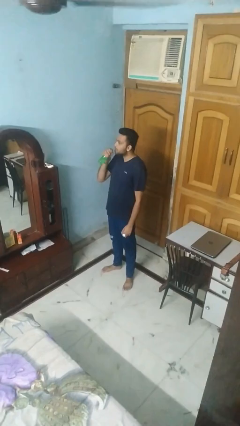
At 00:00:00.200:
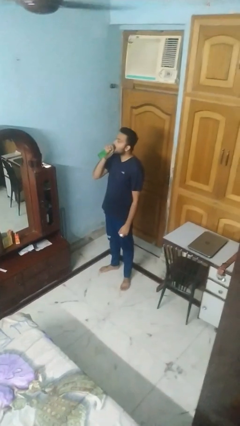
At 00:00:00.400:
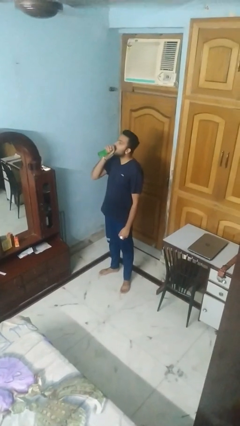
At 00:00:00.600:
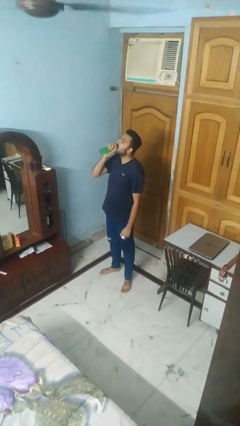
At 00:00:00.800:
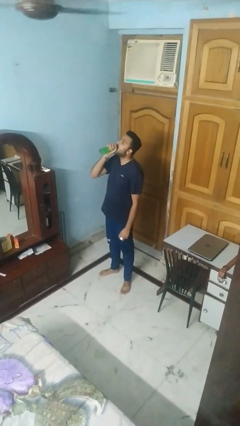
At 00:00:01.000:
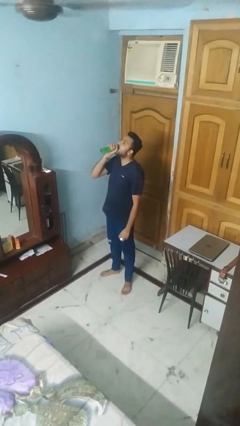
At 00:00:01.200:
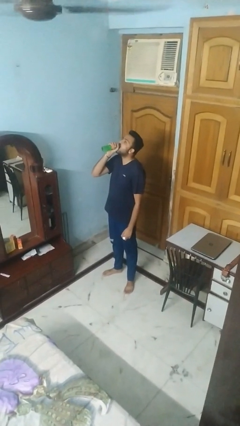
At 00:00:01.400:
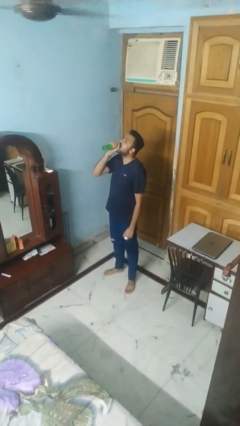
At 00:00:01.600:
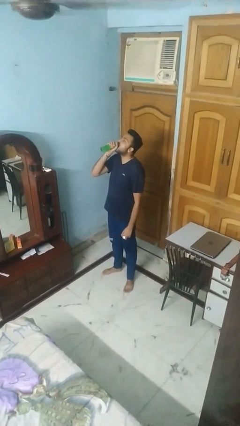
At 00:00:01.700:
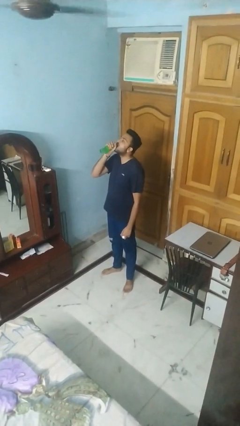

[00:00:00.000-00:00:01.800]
person drinks from bottle

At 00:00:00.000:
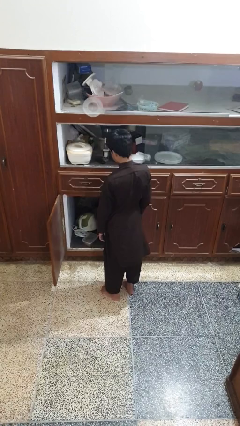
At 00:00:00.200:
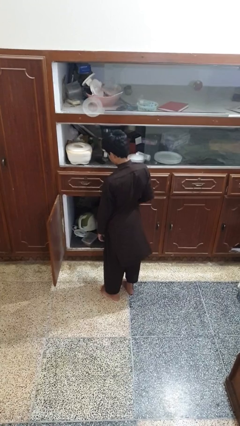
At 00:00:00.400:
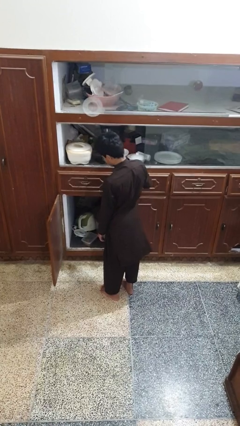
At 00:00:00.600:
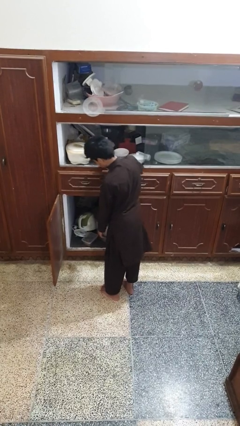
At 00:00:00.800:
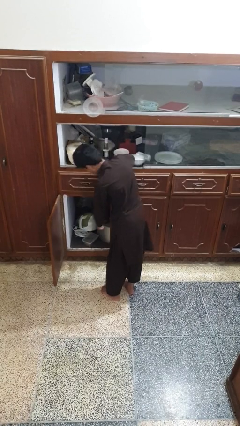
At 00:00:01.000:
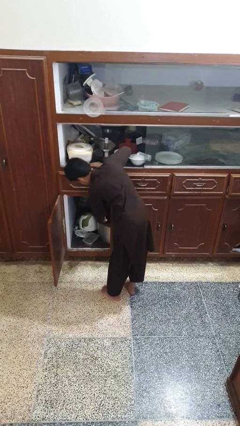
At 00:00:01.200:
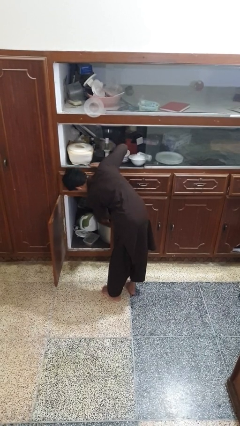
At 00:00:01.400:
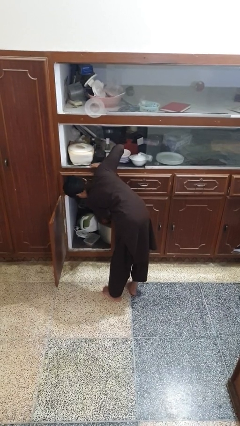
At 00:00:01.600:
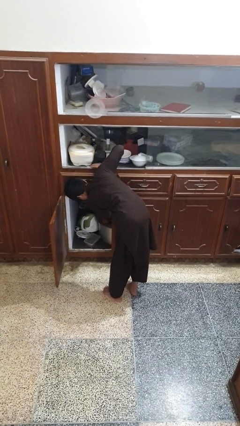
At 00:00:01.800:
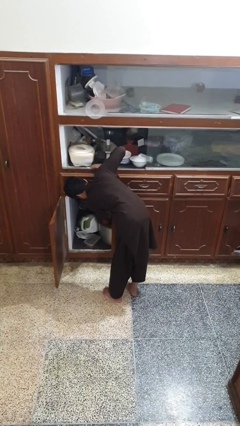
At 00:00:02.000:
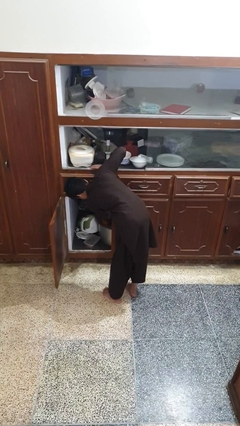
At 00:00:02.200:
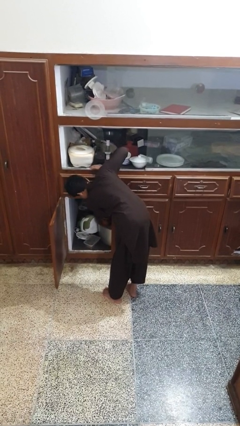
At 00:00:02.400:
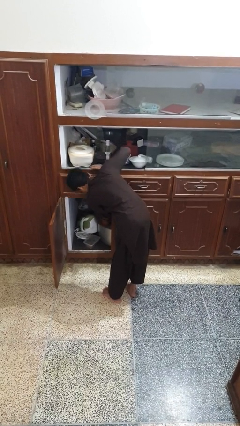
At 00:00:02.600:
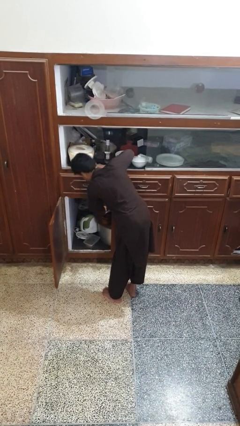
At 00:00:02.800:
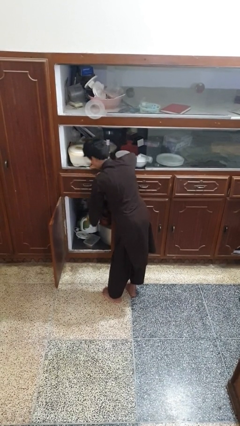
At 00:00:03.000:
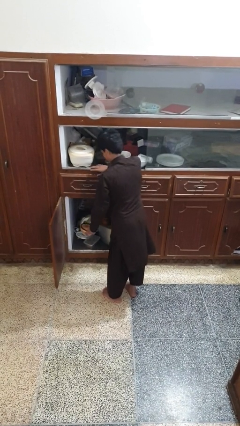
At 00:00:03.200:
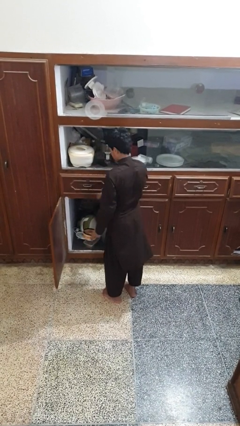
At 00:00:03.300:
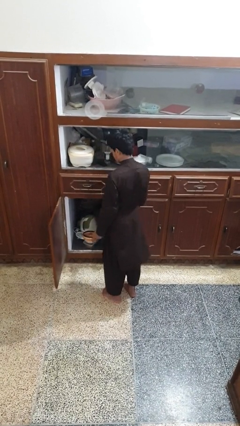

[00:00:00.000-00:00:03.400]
person takes object from cabinet

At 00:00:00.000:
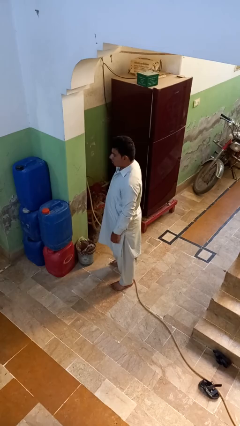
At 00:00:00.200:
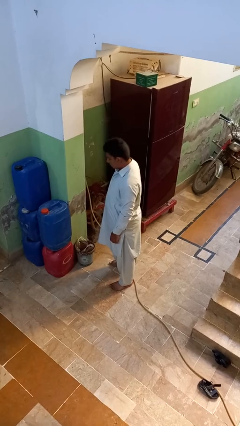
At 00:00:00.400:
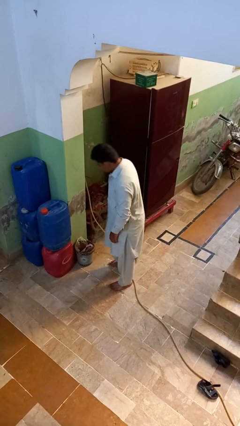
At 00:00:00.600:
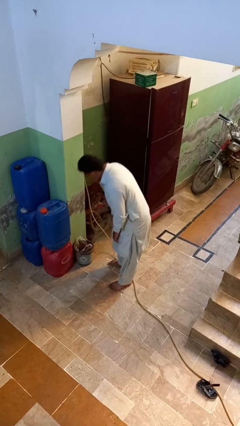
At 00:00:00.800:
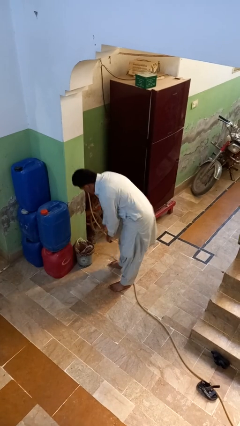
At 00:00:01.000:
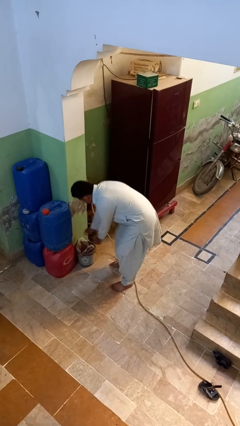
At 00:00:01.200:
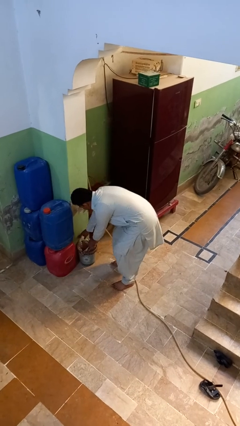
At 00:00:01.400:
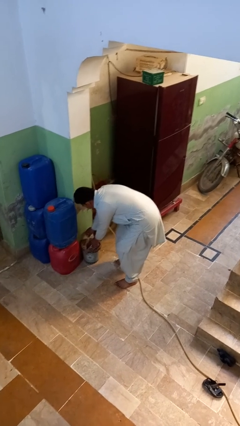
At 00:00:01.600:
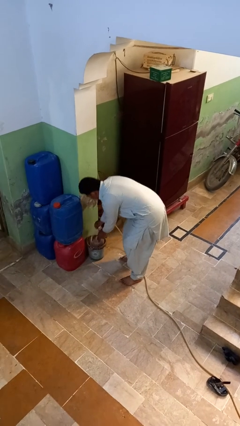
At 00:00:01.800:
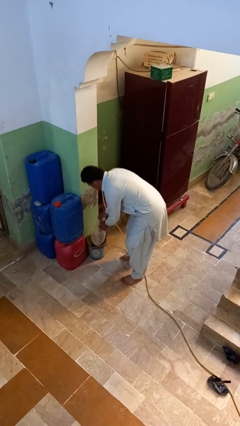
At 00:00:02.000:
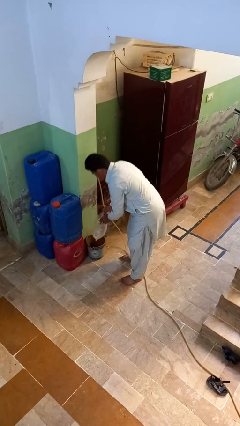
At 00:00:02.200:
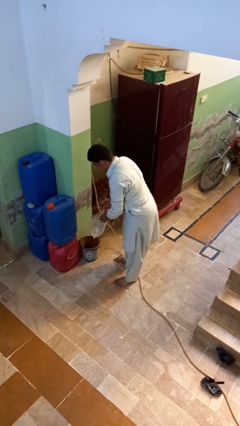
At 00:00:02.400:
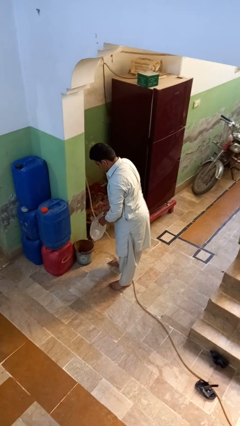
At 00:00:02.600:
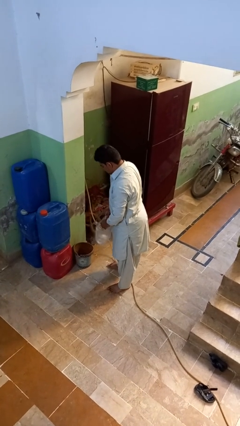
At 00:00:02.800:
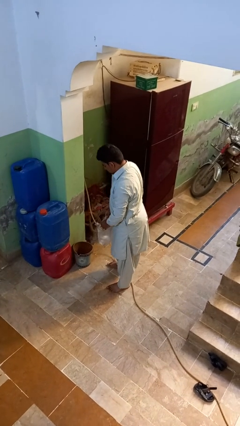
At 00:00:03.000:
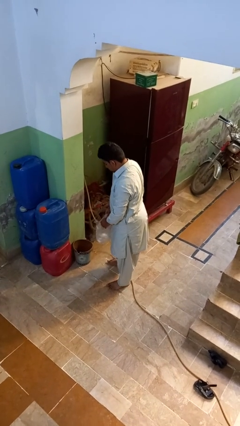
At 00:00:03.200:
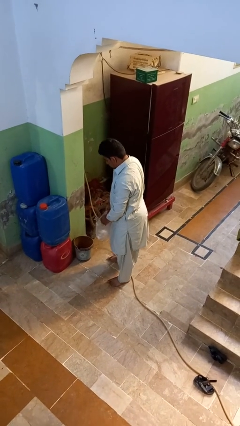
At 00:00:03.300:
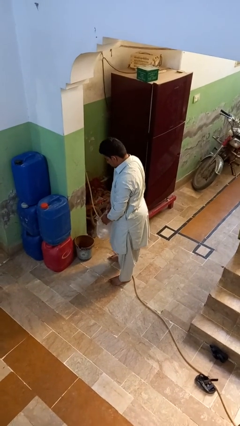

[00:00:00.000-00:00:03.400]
person removes trashbag from trashcan

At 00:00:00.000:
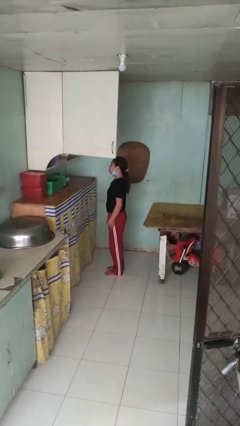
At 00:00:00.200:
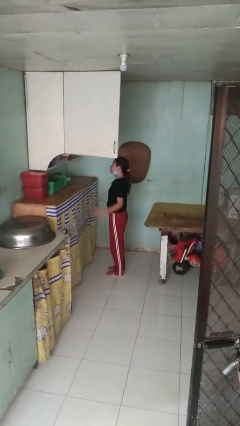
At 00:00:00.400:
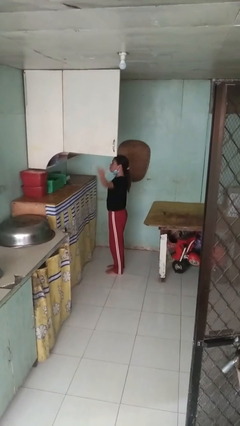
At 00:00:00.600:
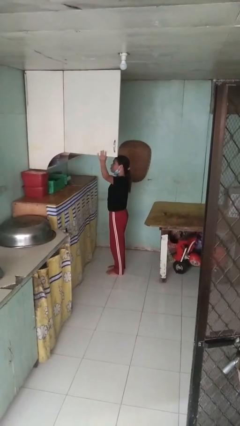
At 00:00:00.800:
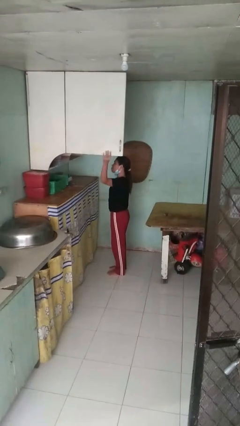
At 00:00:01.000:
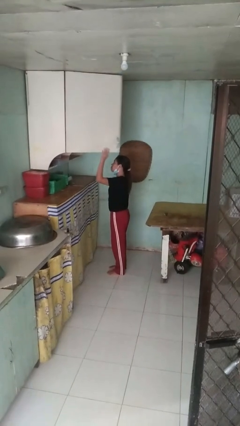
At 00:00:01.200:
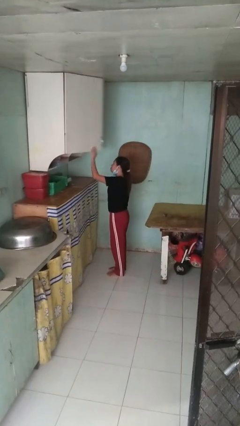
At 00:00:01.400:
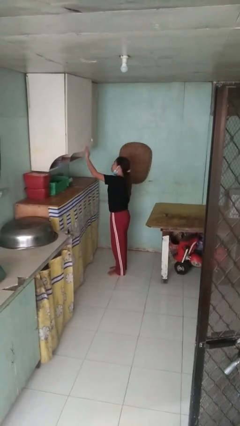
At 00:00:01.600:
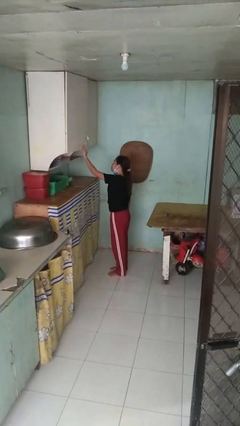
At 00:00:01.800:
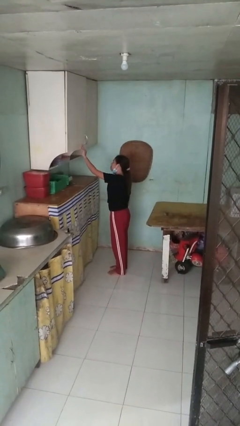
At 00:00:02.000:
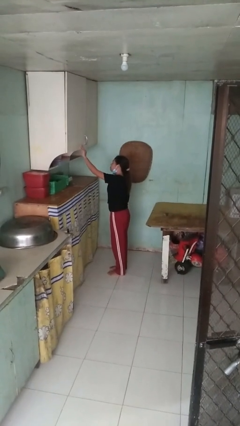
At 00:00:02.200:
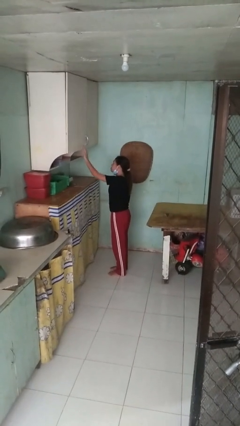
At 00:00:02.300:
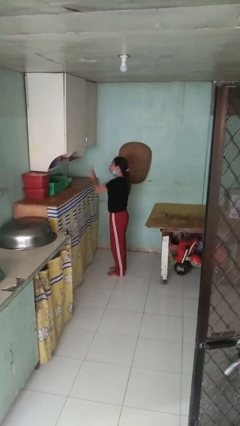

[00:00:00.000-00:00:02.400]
person closes cabinet

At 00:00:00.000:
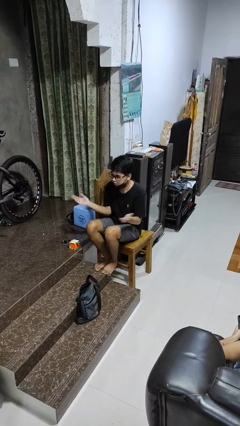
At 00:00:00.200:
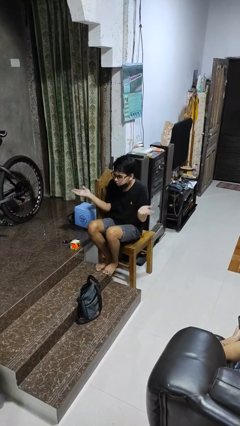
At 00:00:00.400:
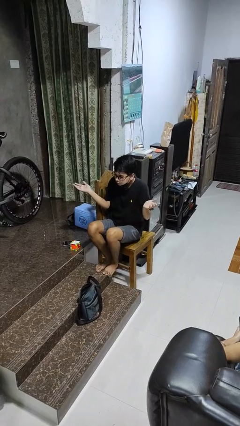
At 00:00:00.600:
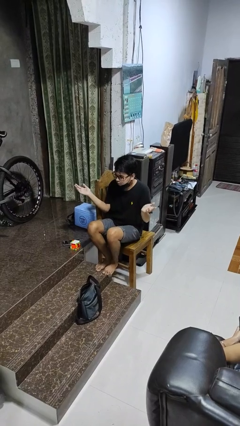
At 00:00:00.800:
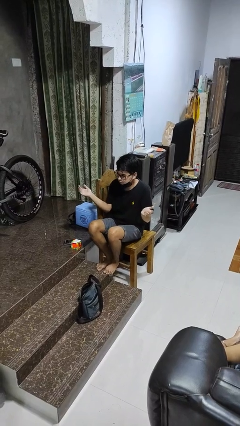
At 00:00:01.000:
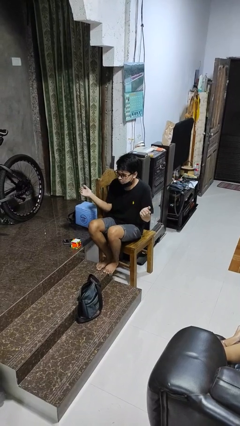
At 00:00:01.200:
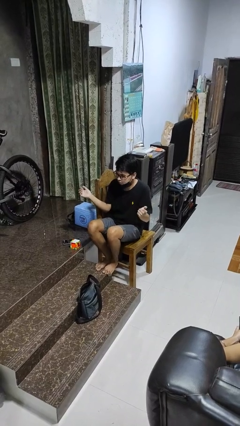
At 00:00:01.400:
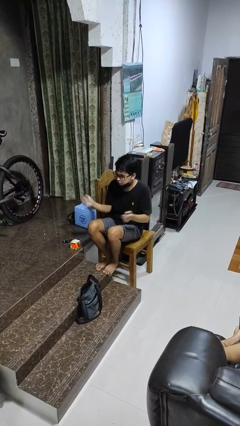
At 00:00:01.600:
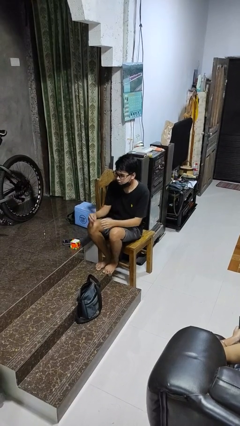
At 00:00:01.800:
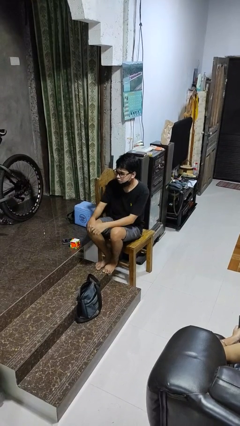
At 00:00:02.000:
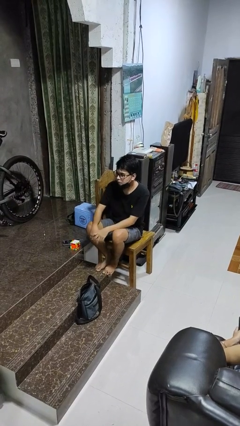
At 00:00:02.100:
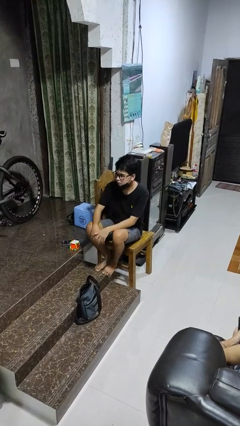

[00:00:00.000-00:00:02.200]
person shrugs

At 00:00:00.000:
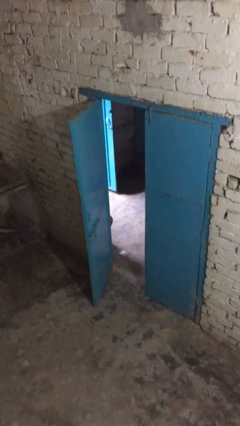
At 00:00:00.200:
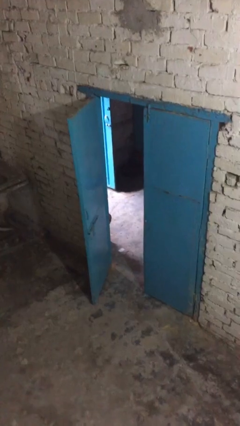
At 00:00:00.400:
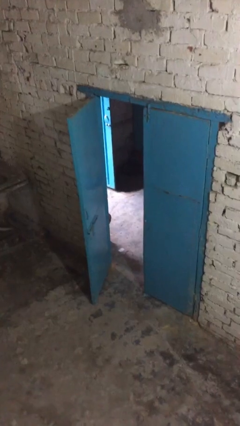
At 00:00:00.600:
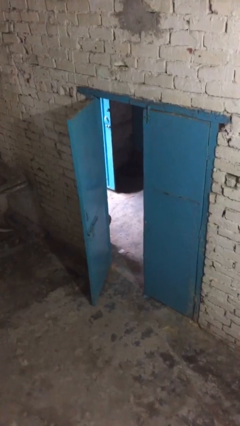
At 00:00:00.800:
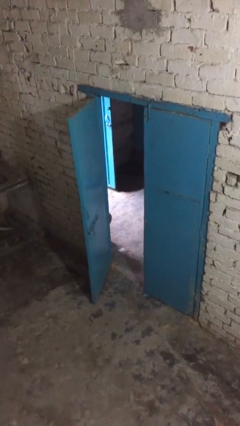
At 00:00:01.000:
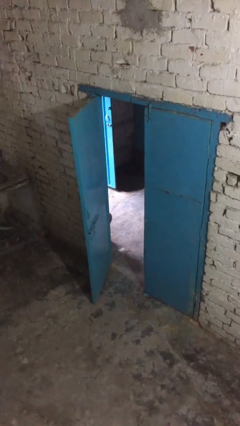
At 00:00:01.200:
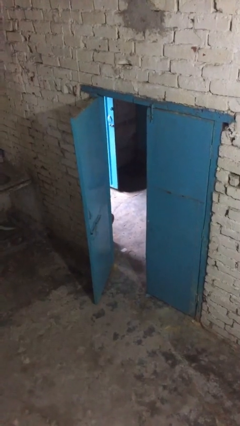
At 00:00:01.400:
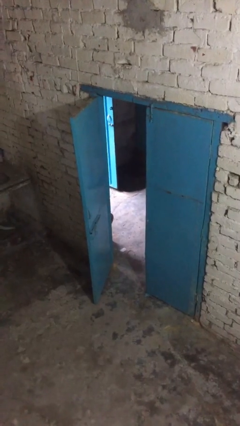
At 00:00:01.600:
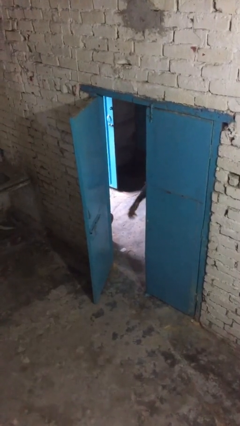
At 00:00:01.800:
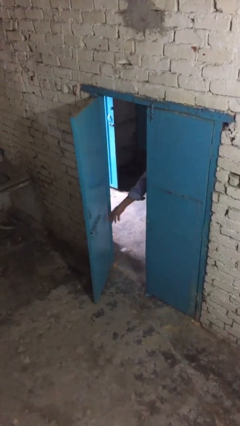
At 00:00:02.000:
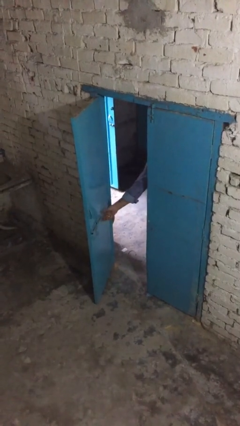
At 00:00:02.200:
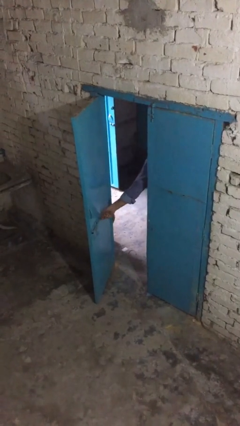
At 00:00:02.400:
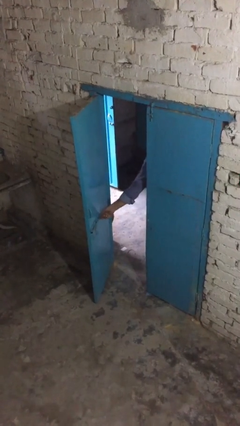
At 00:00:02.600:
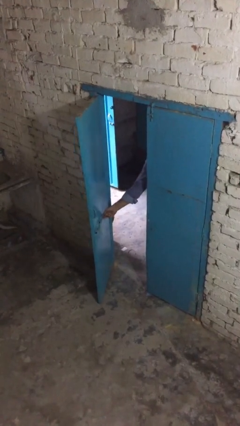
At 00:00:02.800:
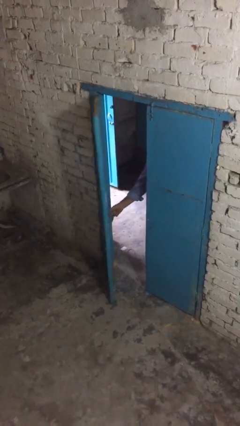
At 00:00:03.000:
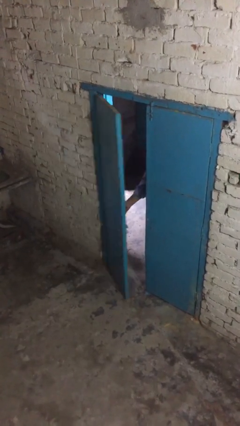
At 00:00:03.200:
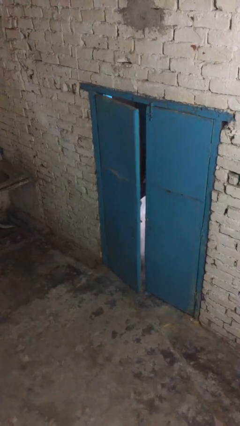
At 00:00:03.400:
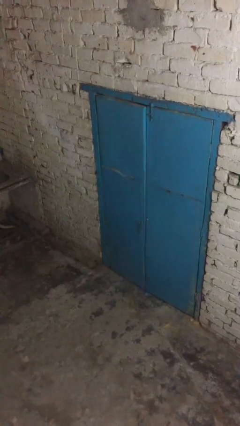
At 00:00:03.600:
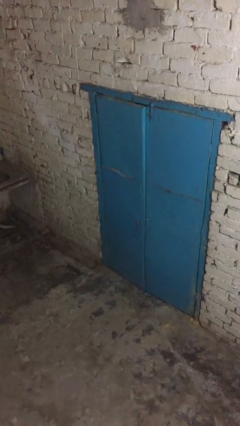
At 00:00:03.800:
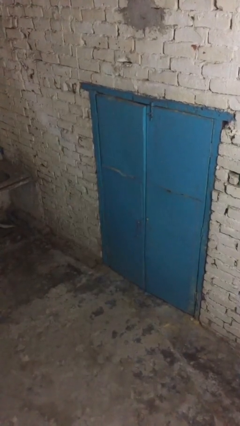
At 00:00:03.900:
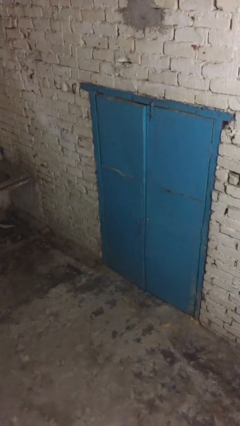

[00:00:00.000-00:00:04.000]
person closes facility door
